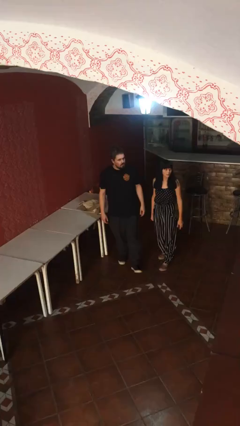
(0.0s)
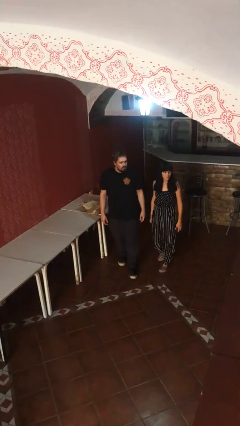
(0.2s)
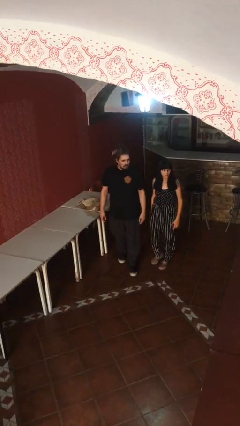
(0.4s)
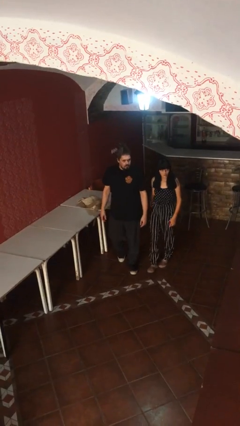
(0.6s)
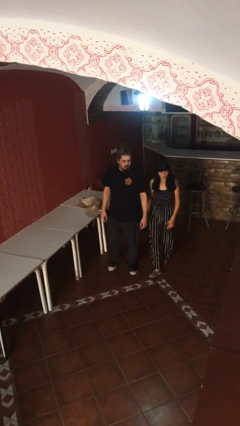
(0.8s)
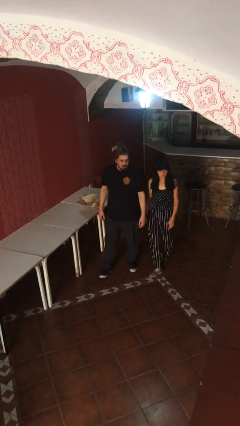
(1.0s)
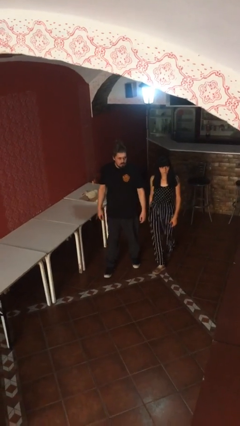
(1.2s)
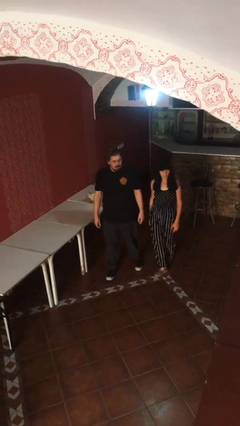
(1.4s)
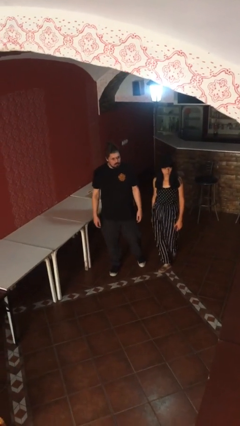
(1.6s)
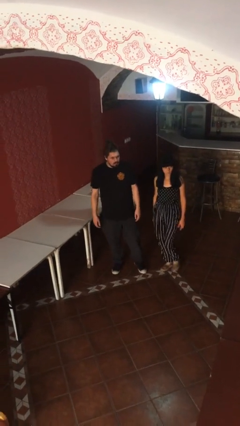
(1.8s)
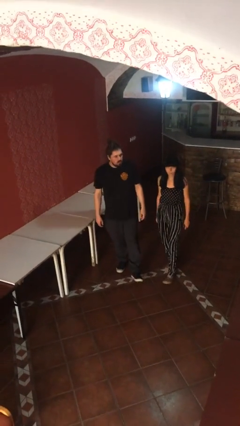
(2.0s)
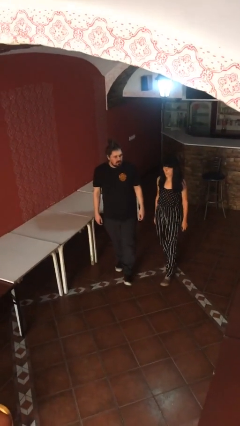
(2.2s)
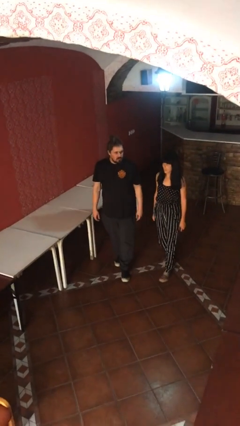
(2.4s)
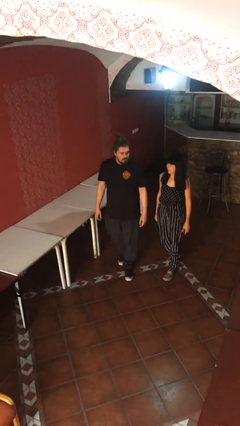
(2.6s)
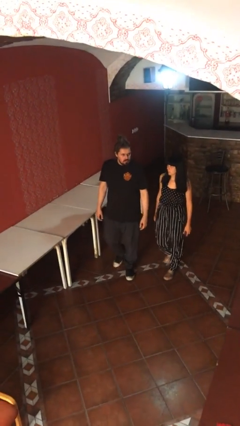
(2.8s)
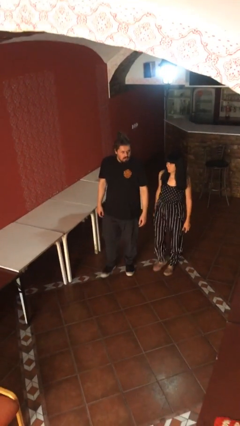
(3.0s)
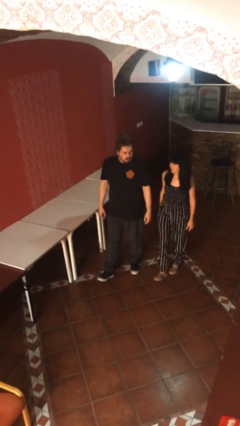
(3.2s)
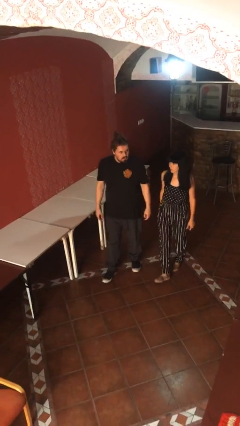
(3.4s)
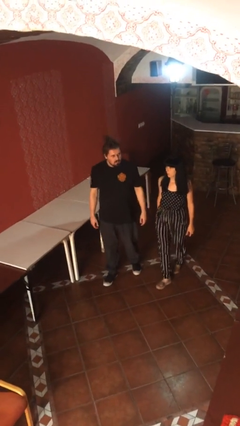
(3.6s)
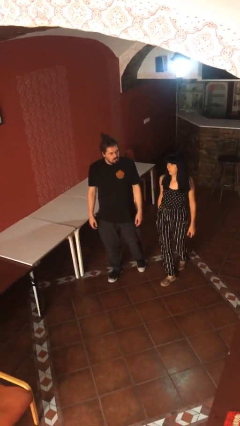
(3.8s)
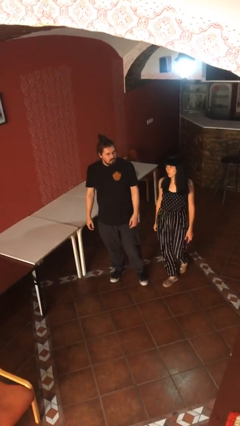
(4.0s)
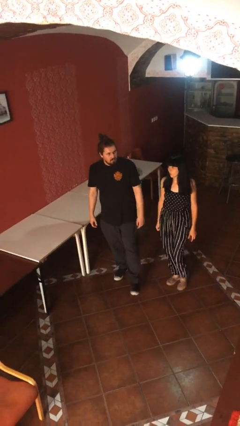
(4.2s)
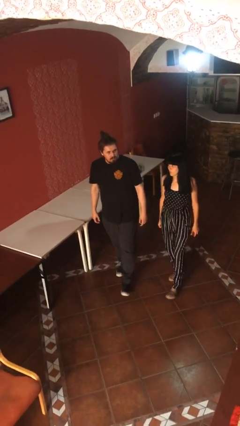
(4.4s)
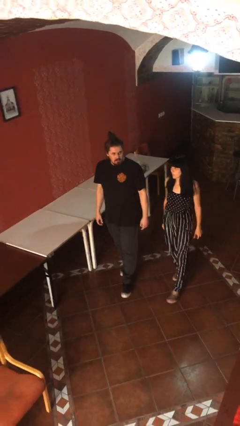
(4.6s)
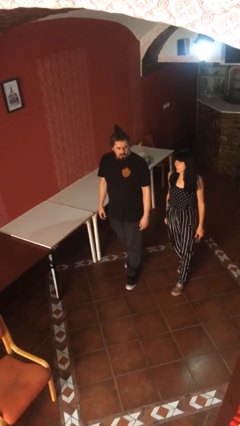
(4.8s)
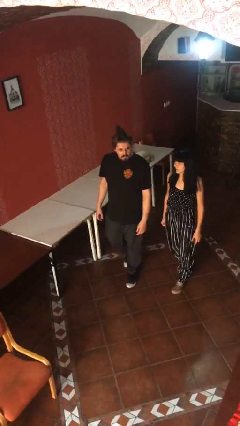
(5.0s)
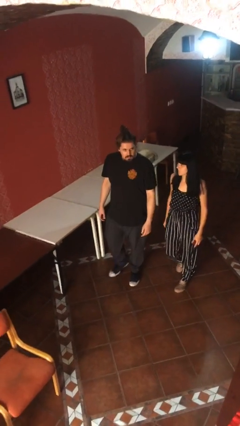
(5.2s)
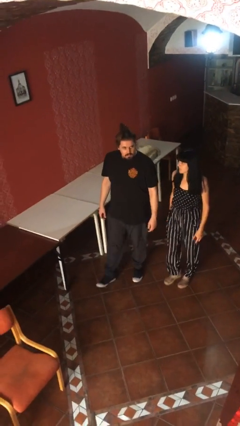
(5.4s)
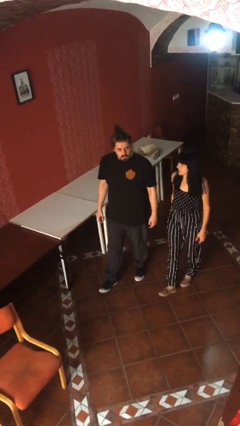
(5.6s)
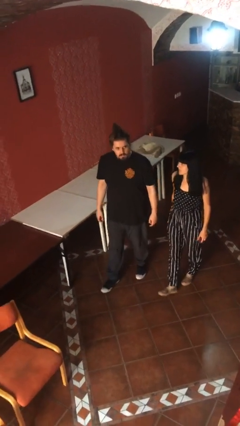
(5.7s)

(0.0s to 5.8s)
person talks to person

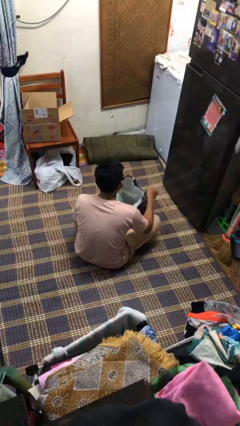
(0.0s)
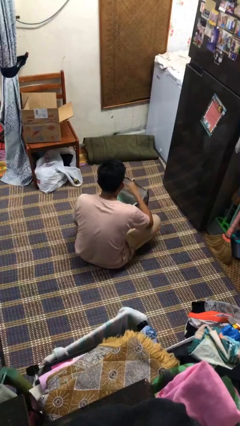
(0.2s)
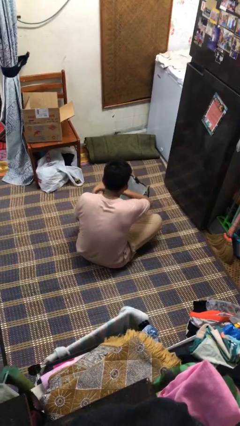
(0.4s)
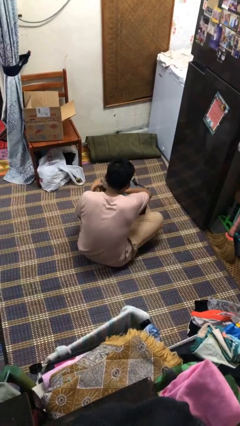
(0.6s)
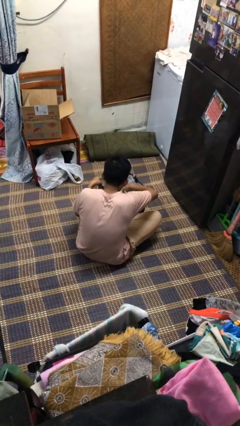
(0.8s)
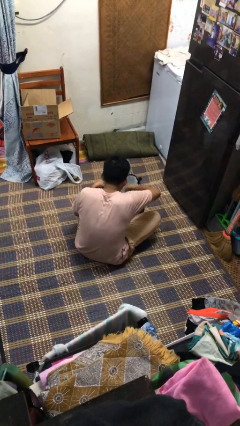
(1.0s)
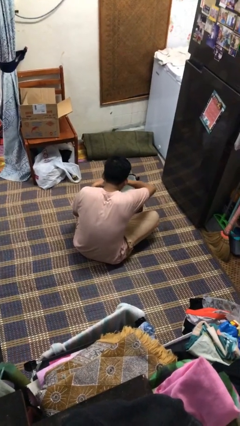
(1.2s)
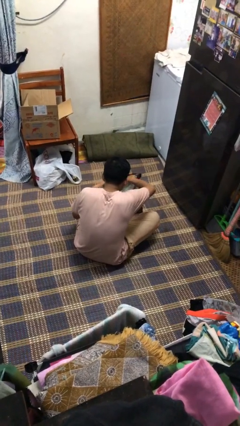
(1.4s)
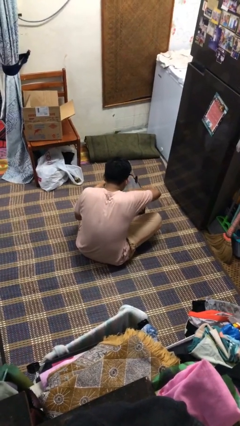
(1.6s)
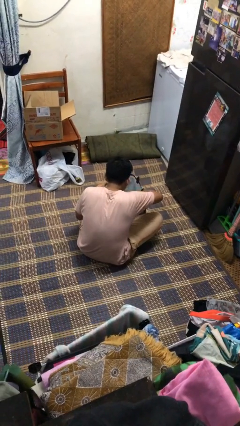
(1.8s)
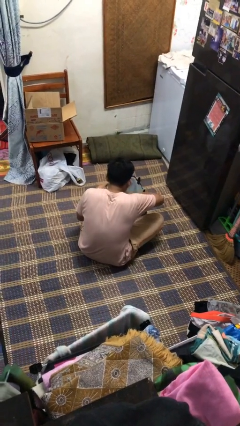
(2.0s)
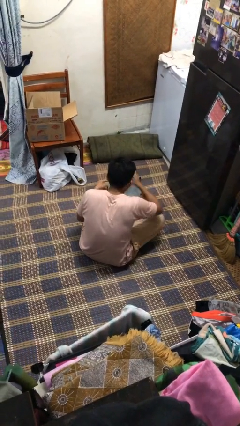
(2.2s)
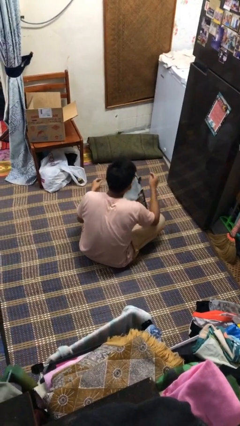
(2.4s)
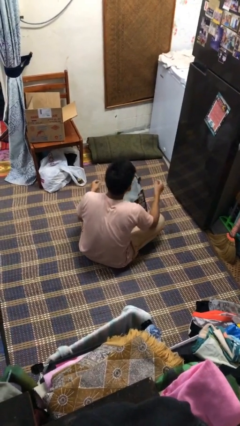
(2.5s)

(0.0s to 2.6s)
person searches in bag

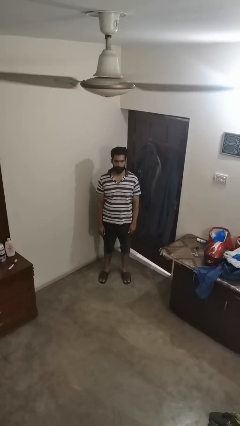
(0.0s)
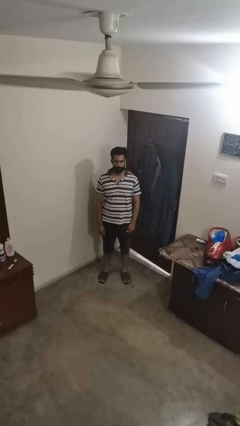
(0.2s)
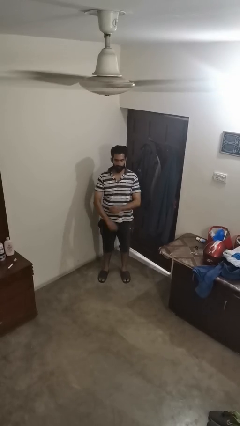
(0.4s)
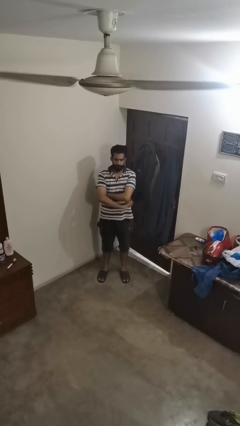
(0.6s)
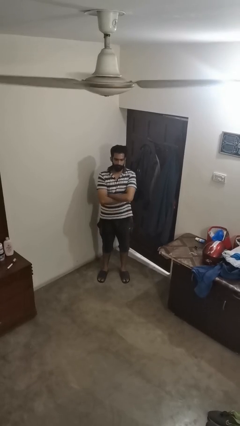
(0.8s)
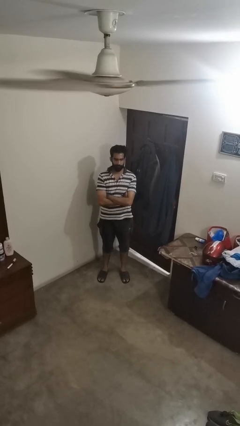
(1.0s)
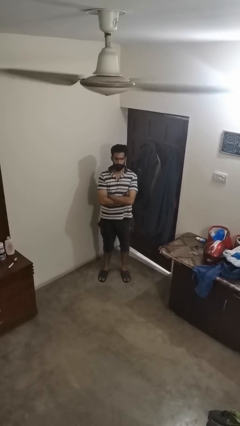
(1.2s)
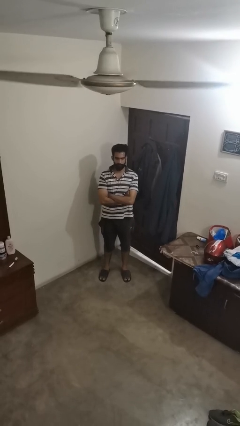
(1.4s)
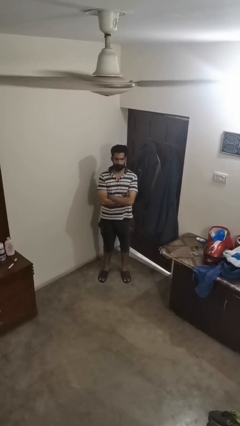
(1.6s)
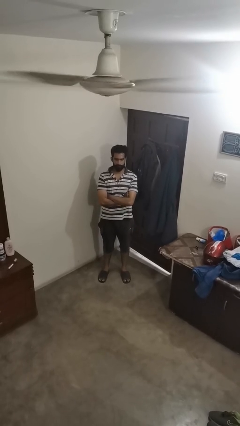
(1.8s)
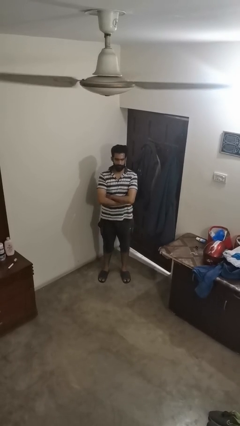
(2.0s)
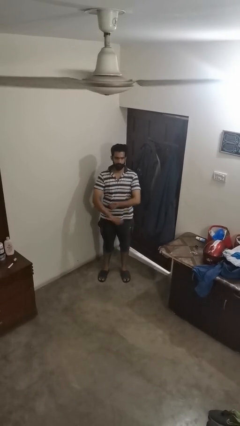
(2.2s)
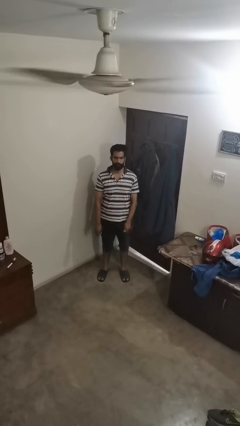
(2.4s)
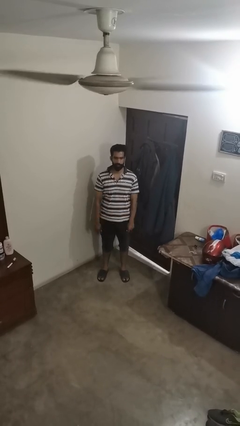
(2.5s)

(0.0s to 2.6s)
person crosses arms

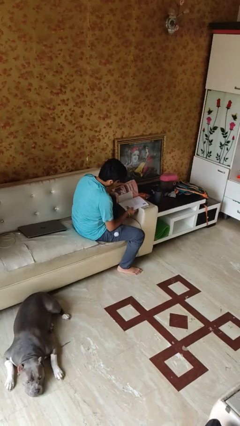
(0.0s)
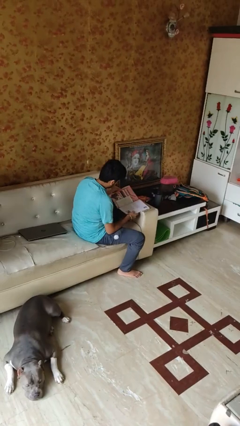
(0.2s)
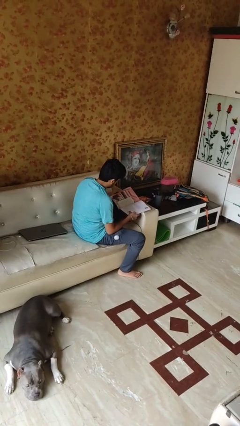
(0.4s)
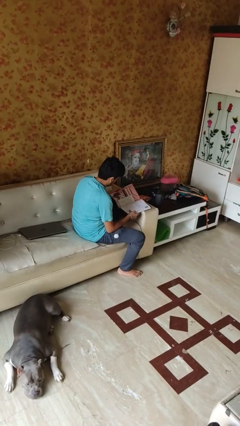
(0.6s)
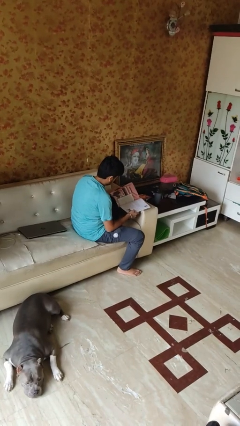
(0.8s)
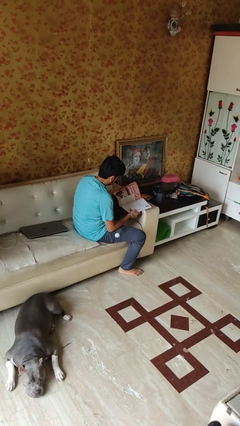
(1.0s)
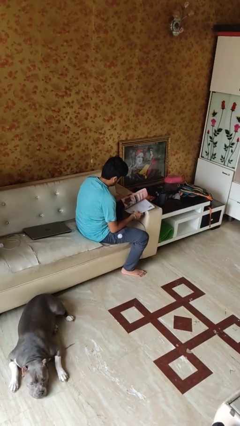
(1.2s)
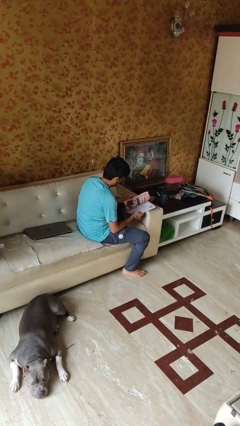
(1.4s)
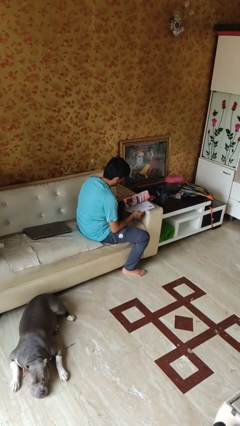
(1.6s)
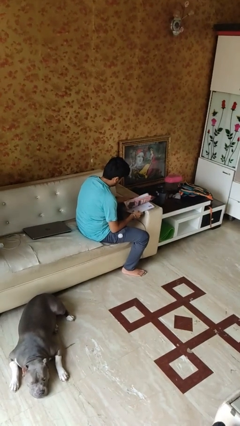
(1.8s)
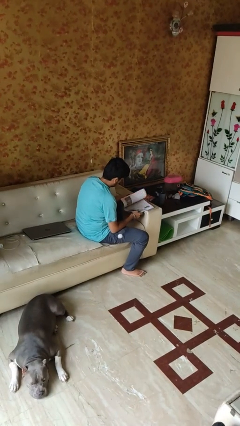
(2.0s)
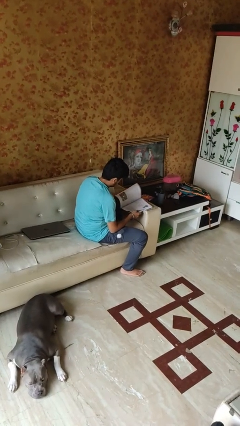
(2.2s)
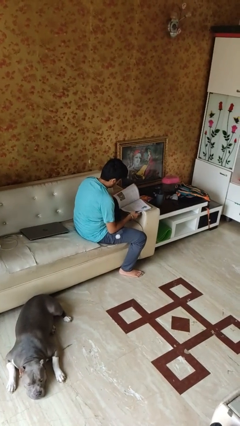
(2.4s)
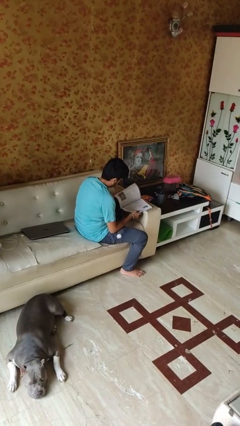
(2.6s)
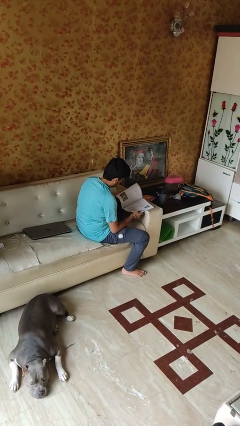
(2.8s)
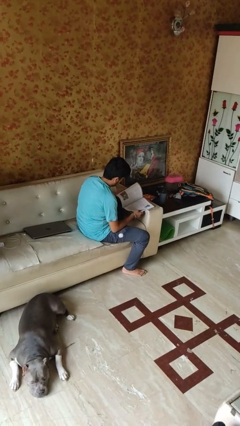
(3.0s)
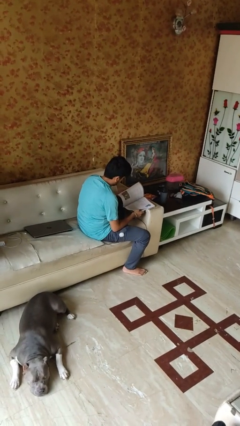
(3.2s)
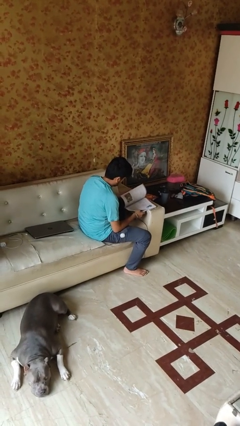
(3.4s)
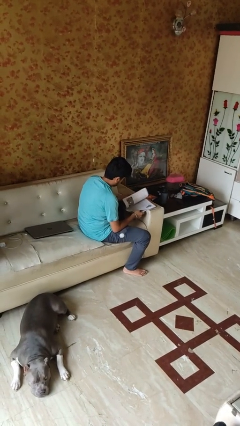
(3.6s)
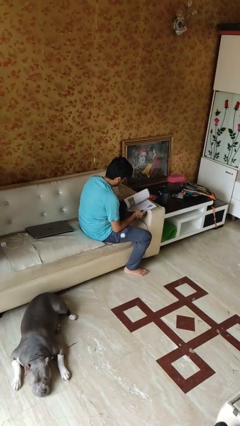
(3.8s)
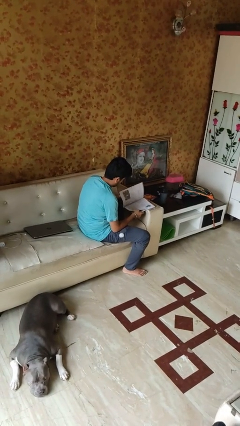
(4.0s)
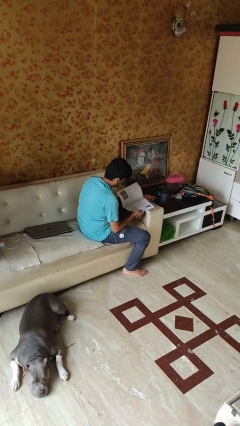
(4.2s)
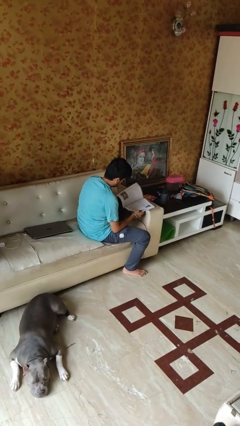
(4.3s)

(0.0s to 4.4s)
person reads magazine

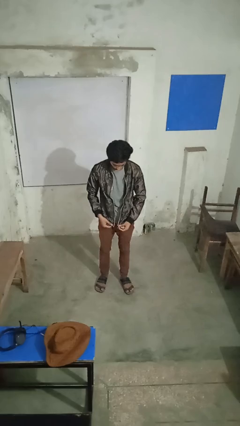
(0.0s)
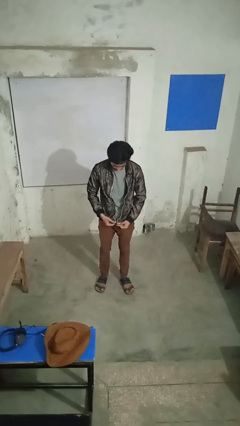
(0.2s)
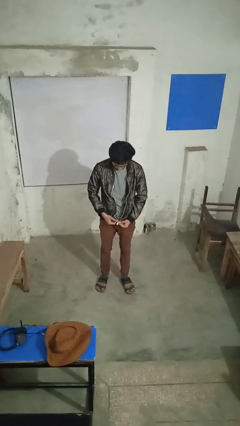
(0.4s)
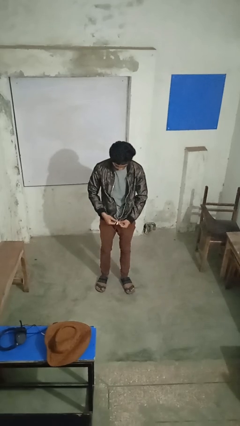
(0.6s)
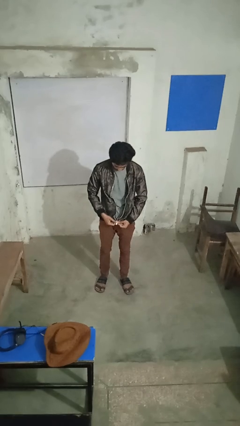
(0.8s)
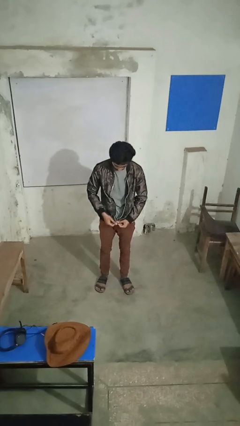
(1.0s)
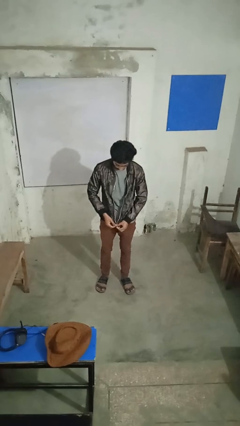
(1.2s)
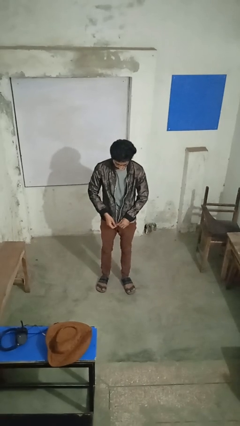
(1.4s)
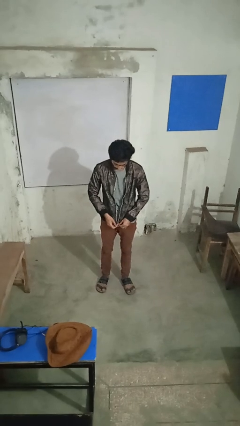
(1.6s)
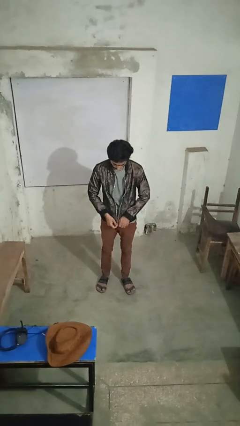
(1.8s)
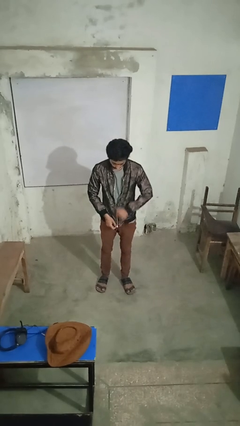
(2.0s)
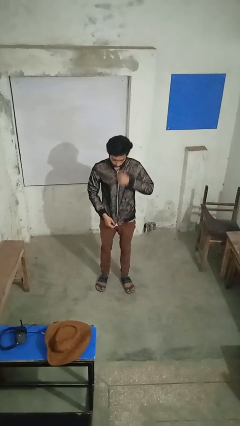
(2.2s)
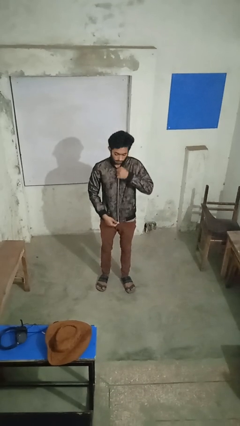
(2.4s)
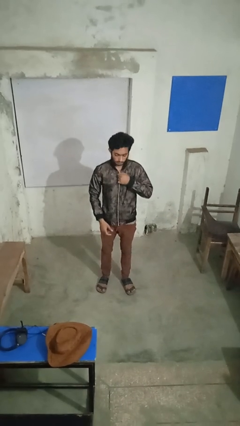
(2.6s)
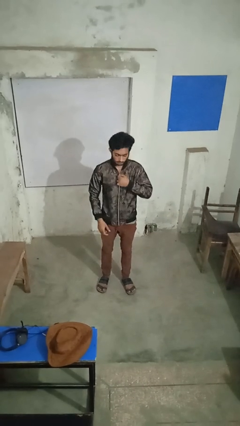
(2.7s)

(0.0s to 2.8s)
person zips up jacket
